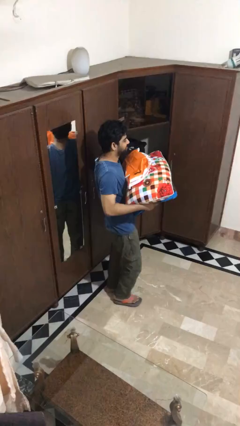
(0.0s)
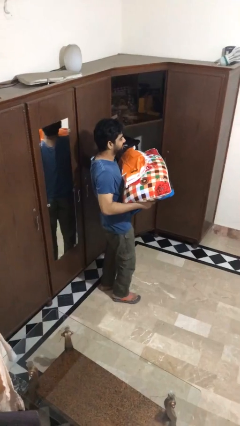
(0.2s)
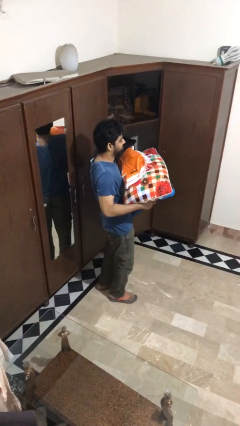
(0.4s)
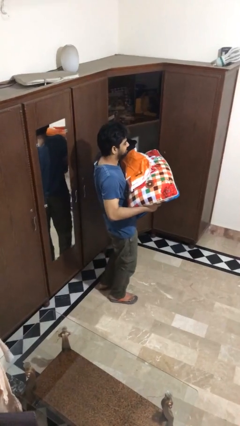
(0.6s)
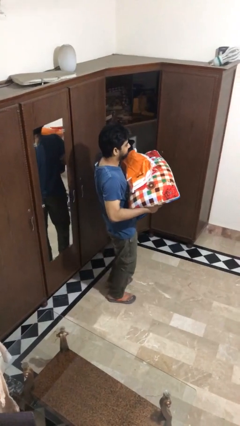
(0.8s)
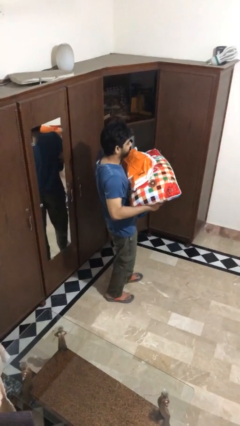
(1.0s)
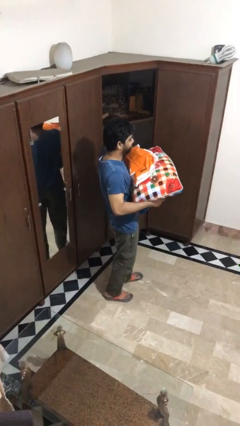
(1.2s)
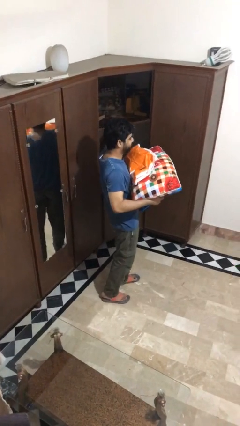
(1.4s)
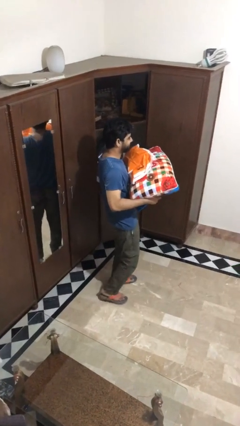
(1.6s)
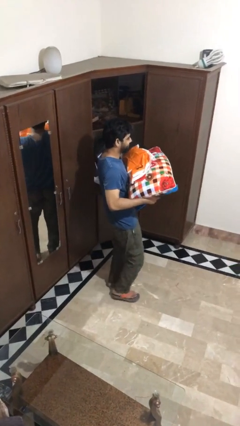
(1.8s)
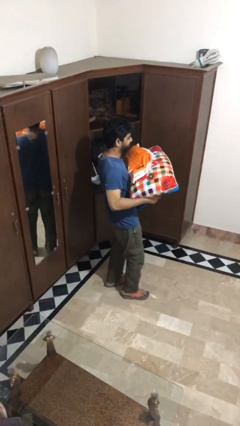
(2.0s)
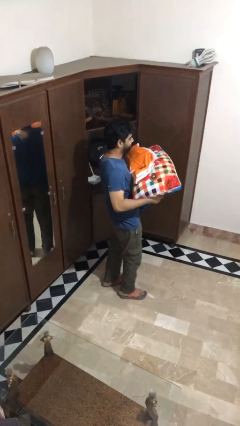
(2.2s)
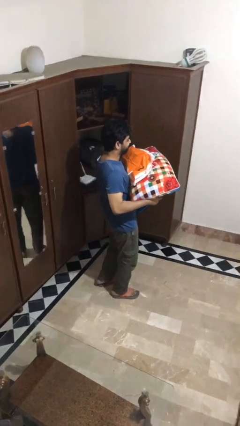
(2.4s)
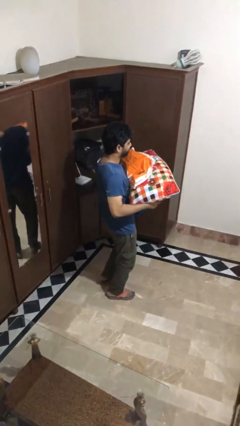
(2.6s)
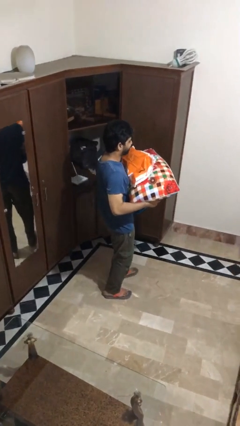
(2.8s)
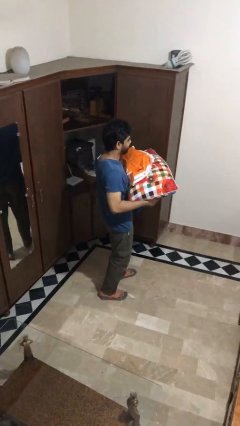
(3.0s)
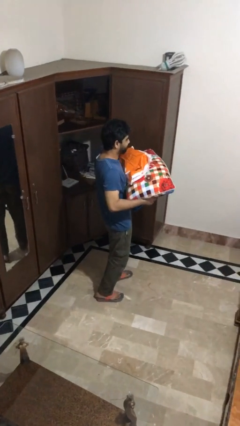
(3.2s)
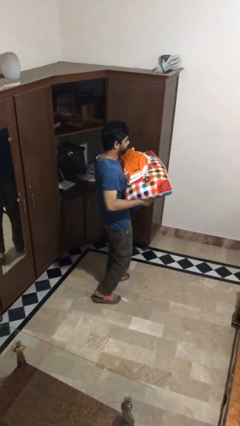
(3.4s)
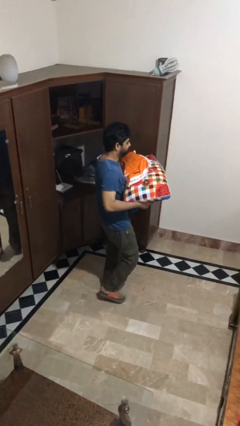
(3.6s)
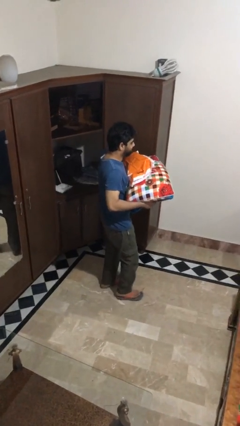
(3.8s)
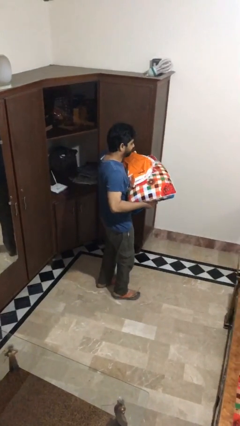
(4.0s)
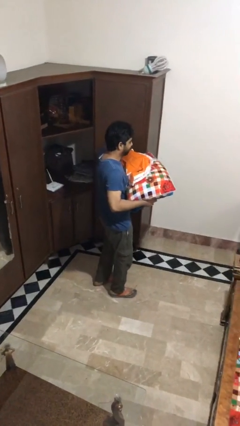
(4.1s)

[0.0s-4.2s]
person carries heavy object

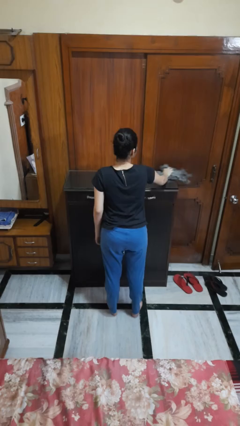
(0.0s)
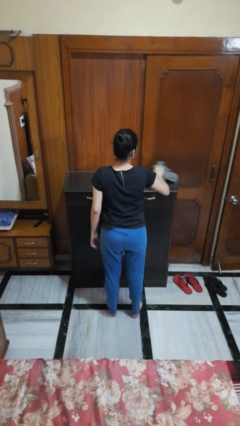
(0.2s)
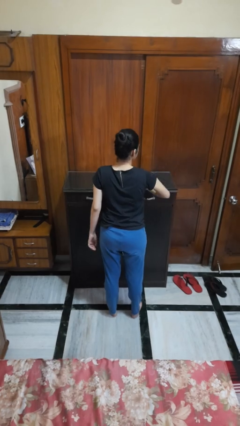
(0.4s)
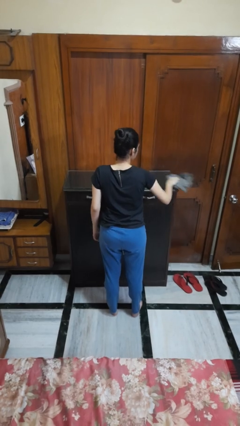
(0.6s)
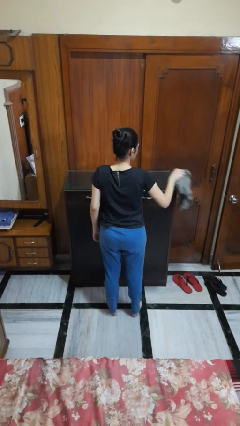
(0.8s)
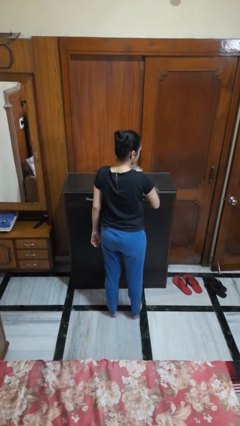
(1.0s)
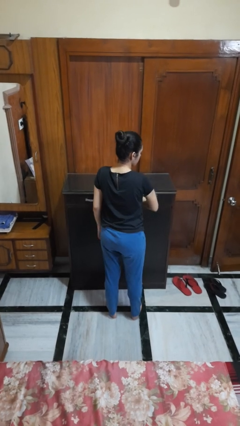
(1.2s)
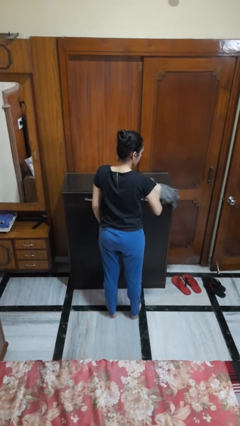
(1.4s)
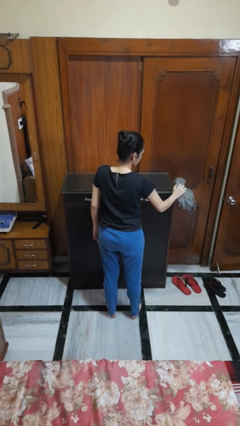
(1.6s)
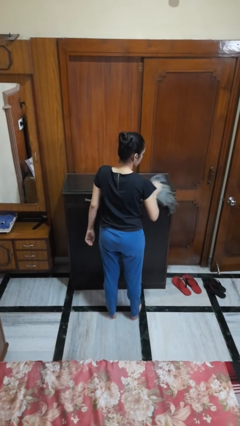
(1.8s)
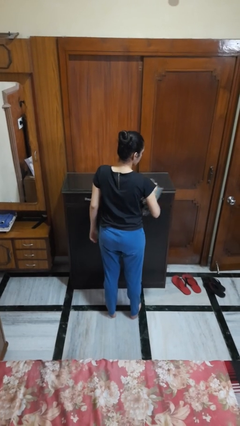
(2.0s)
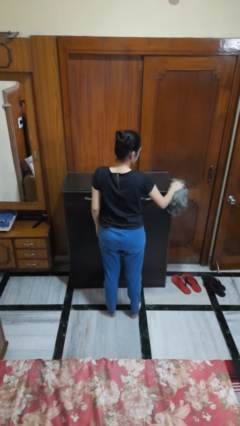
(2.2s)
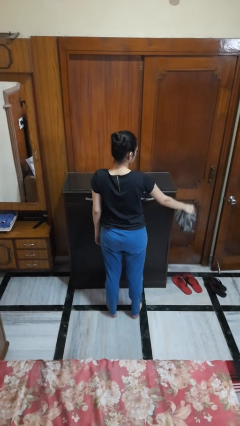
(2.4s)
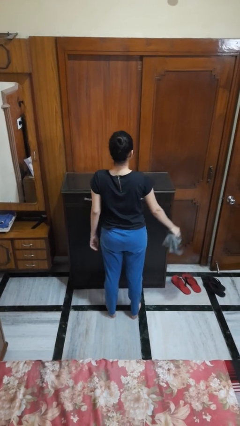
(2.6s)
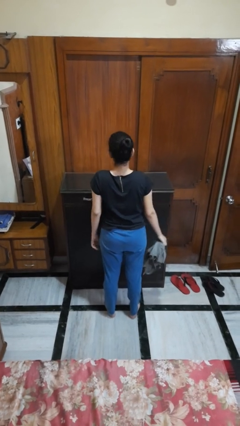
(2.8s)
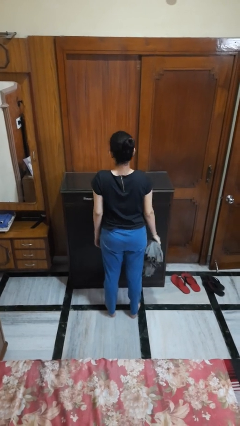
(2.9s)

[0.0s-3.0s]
person cleans table with rag

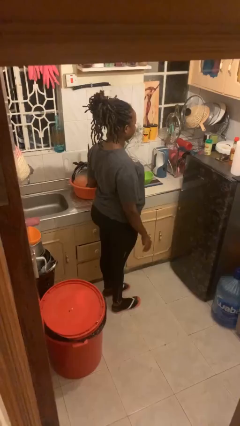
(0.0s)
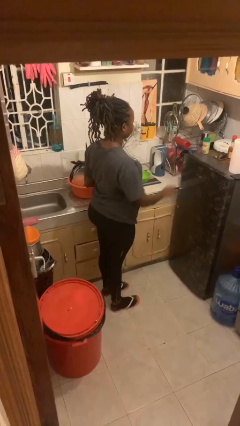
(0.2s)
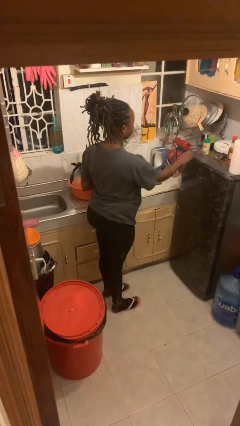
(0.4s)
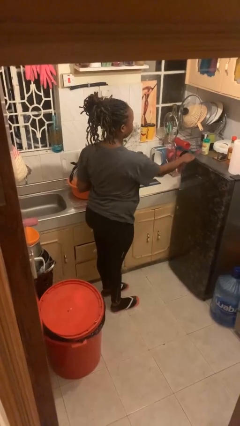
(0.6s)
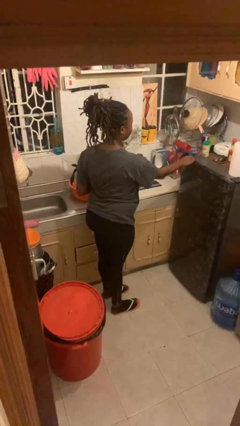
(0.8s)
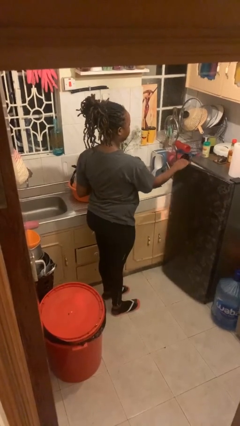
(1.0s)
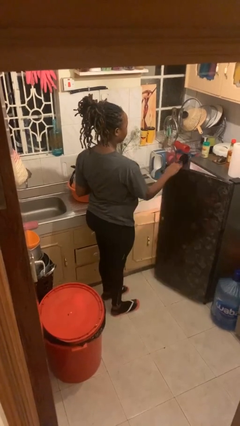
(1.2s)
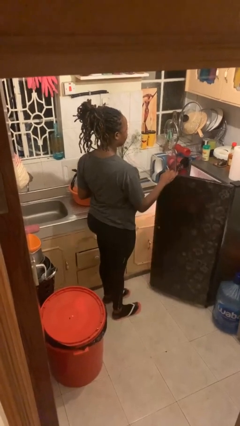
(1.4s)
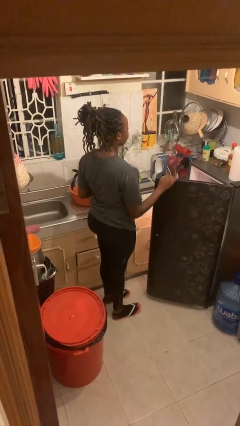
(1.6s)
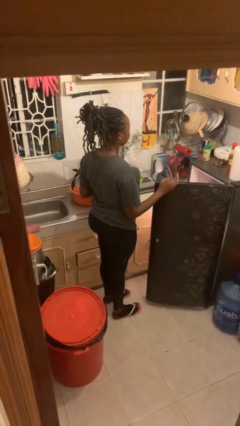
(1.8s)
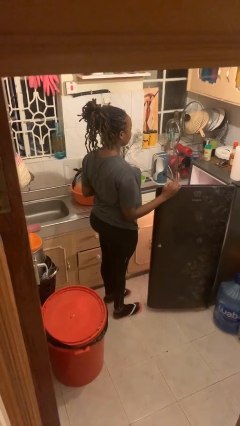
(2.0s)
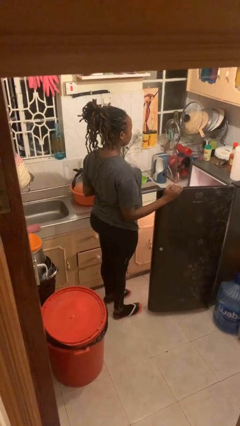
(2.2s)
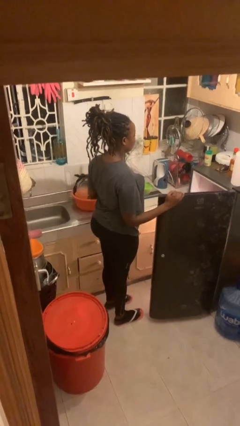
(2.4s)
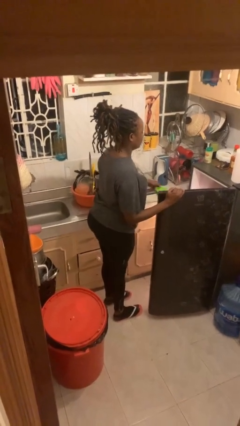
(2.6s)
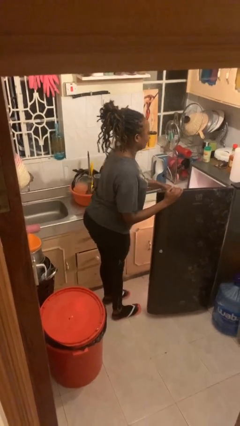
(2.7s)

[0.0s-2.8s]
person opens refrigerator

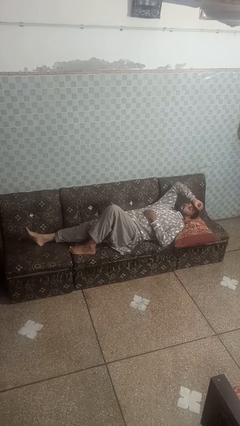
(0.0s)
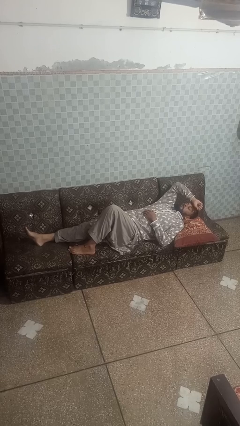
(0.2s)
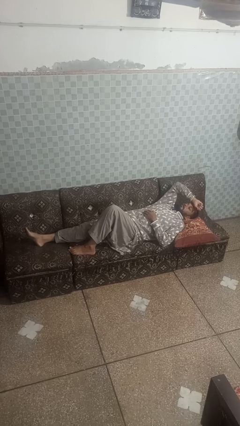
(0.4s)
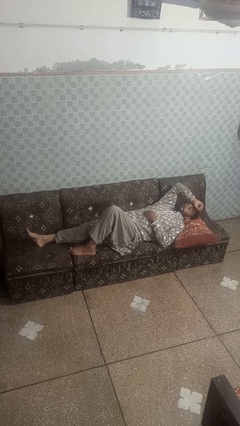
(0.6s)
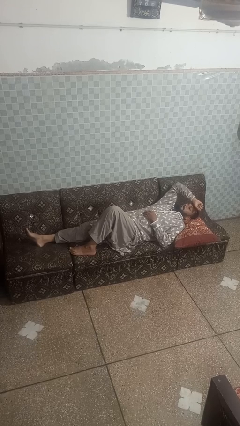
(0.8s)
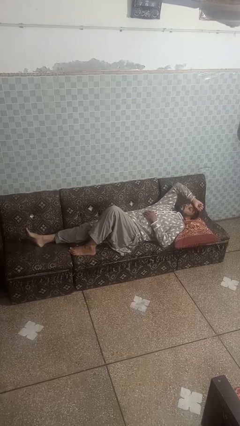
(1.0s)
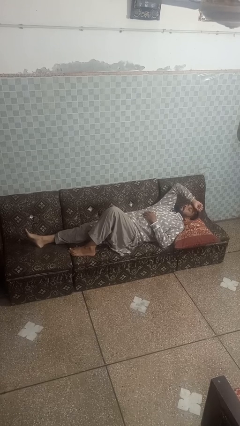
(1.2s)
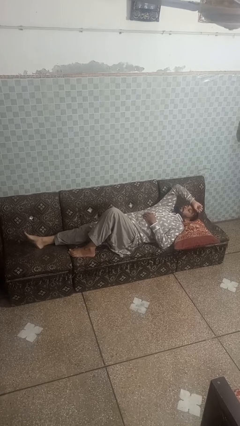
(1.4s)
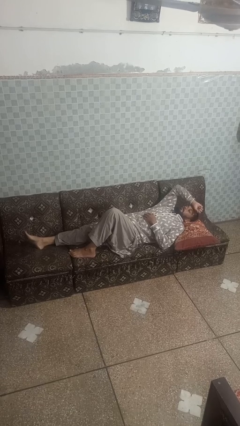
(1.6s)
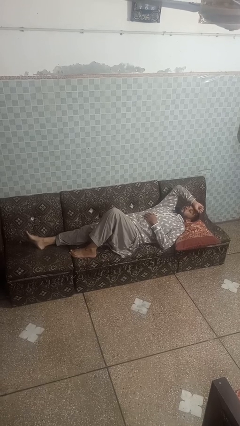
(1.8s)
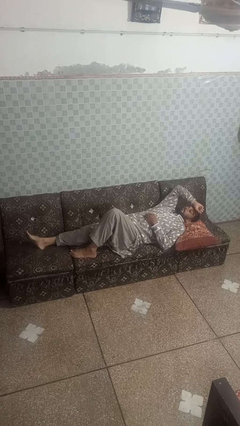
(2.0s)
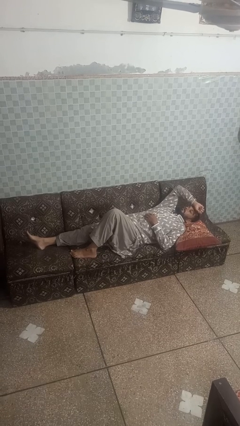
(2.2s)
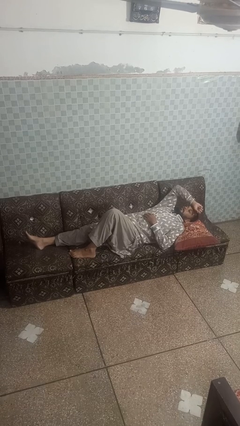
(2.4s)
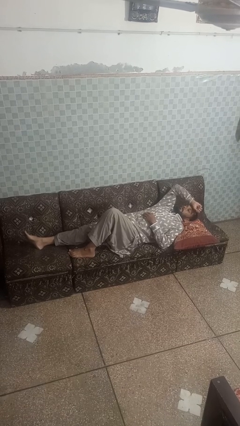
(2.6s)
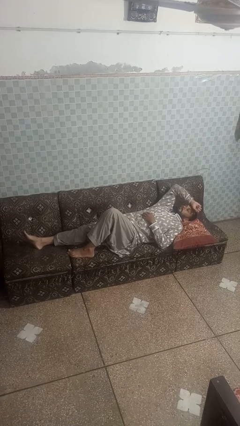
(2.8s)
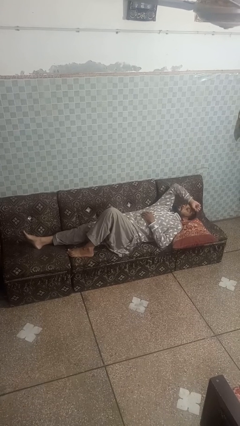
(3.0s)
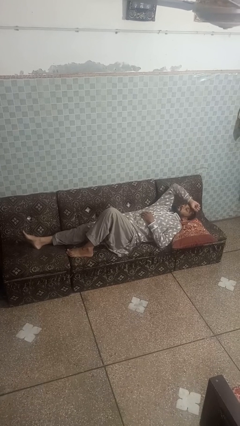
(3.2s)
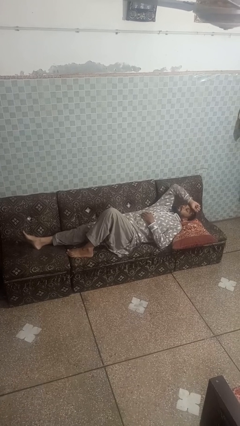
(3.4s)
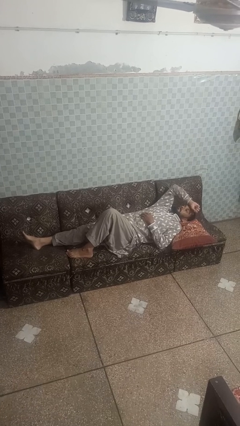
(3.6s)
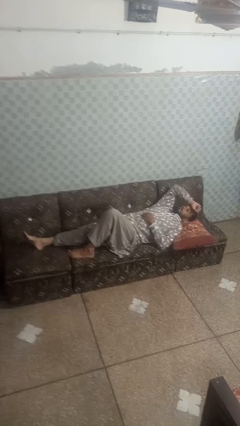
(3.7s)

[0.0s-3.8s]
person lies down on couch

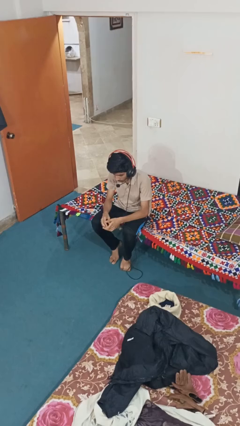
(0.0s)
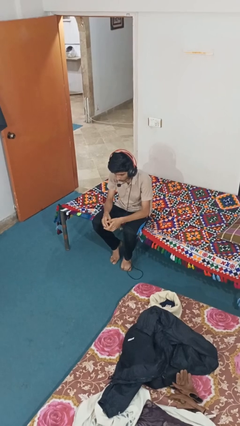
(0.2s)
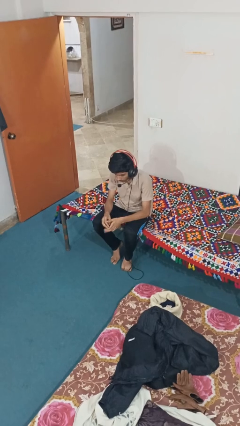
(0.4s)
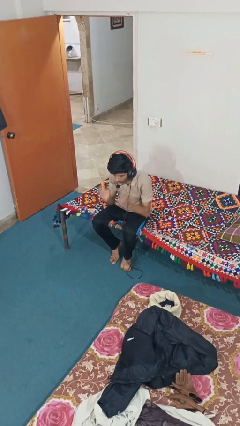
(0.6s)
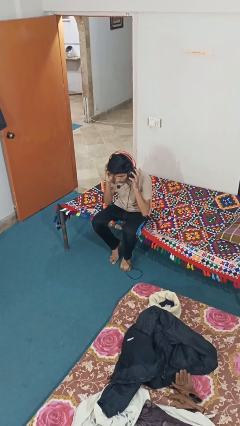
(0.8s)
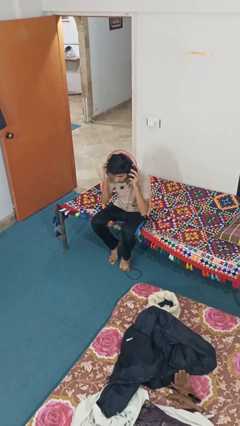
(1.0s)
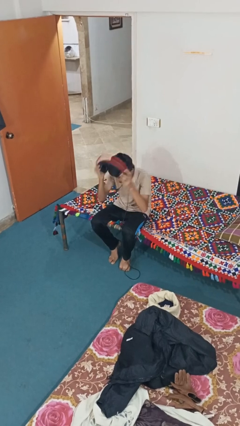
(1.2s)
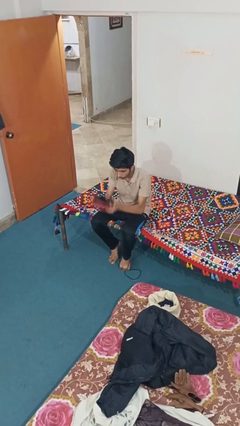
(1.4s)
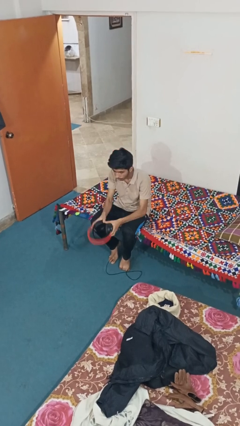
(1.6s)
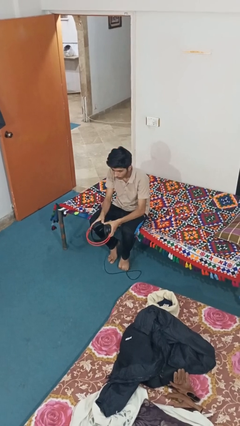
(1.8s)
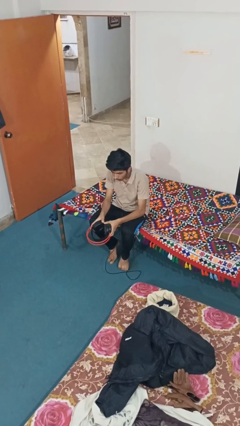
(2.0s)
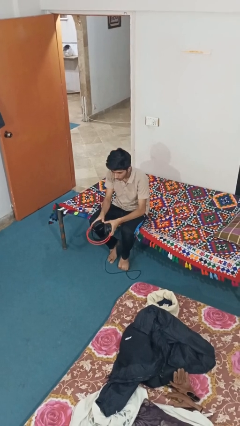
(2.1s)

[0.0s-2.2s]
person takes off headphones

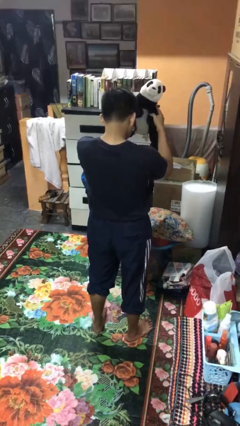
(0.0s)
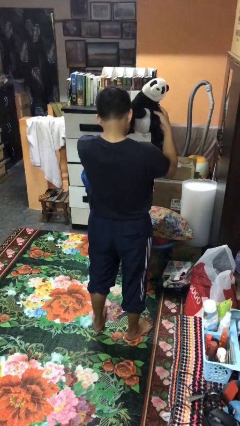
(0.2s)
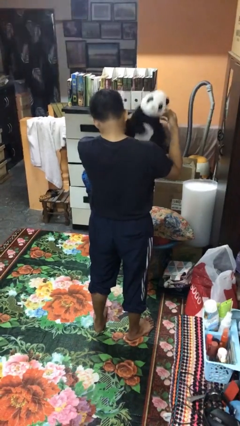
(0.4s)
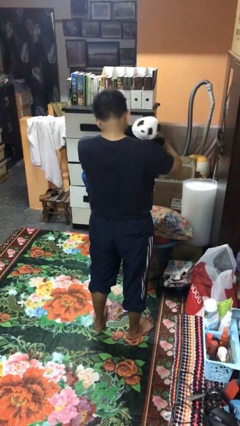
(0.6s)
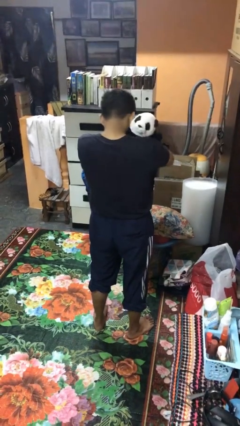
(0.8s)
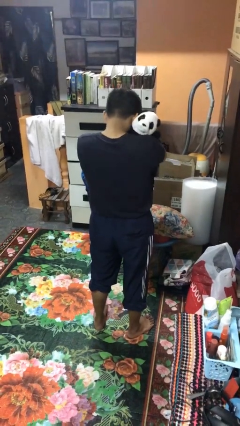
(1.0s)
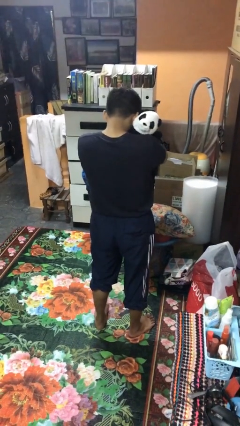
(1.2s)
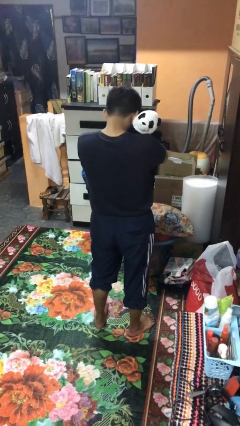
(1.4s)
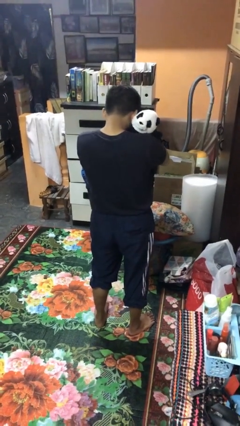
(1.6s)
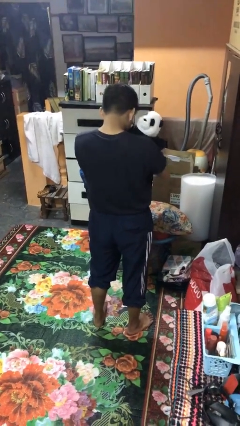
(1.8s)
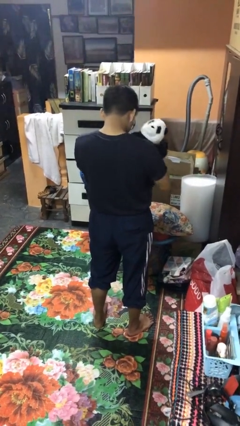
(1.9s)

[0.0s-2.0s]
person hugs stuffed animal
